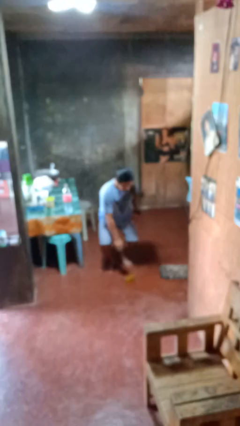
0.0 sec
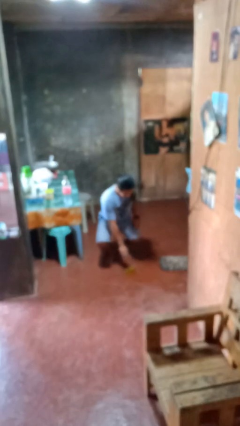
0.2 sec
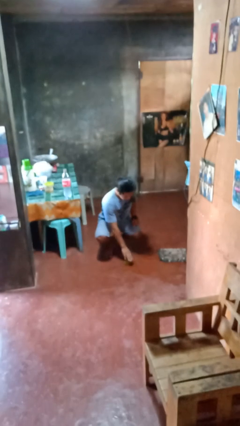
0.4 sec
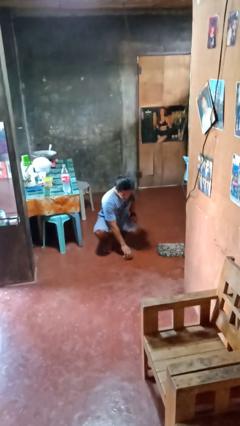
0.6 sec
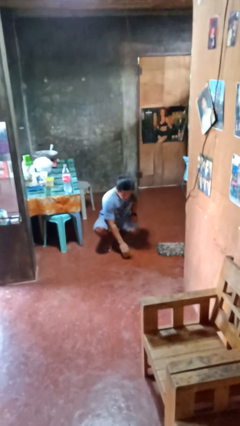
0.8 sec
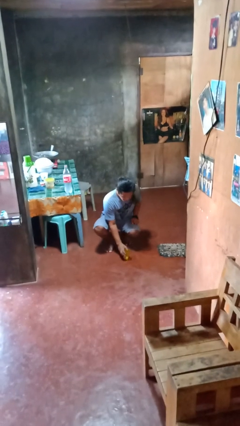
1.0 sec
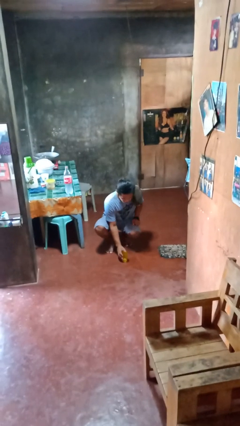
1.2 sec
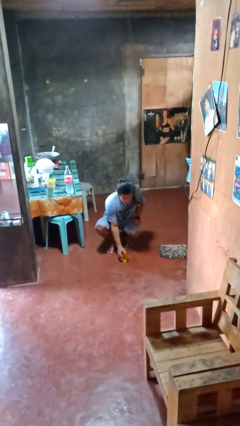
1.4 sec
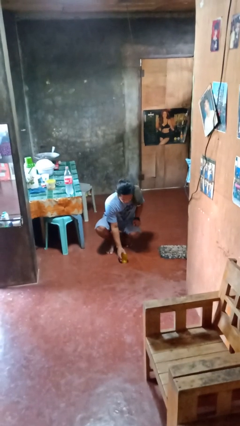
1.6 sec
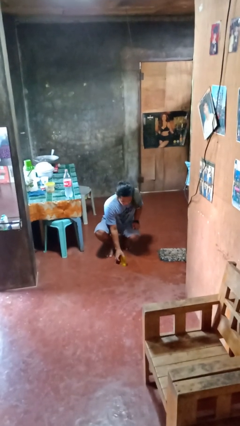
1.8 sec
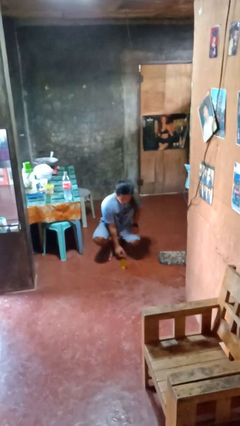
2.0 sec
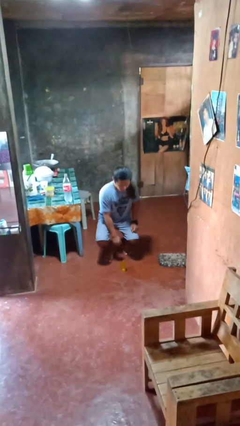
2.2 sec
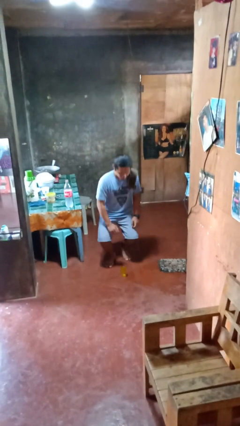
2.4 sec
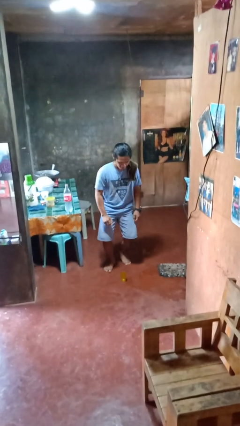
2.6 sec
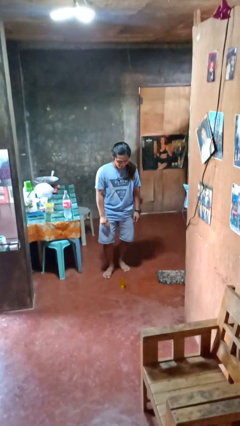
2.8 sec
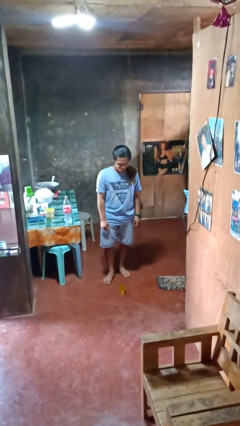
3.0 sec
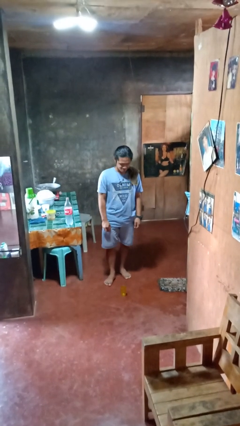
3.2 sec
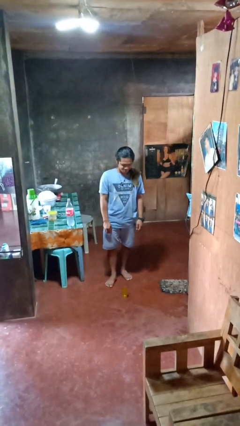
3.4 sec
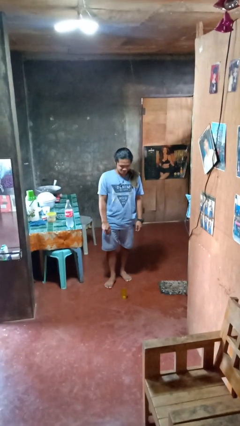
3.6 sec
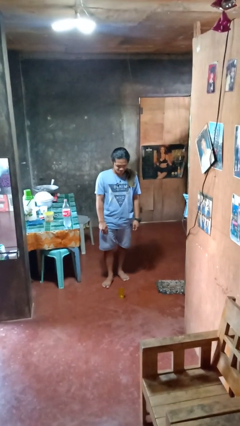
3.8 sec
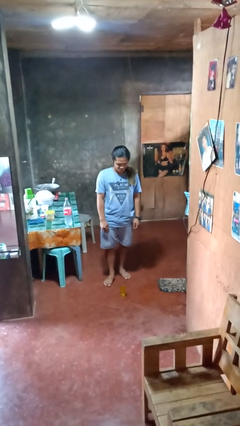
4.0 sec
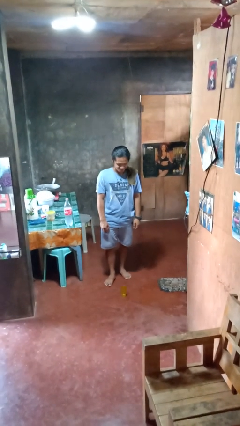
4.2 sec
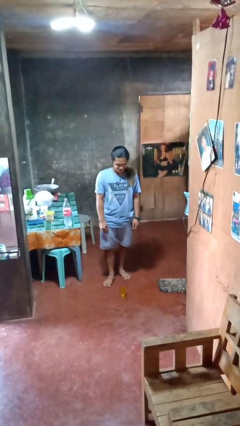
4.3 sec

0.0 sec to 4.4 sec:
person sets upright glass

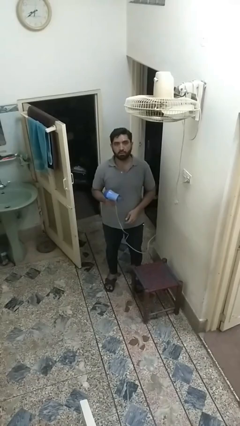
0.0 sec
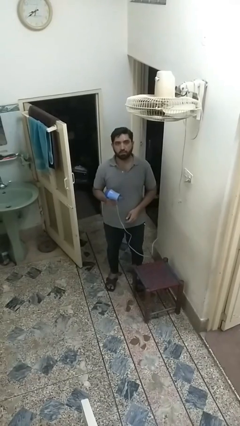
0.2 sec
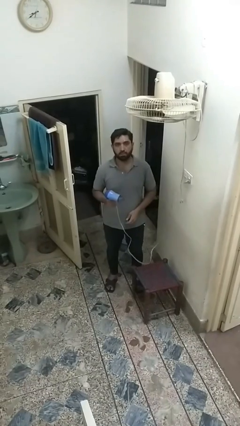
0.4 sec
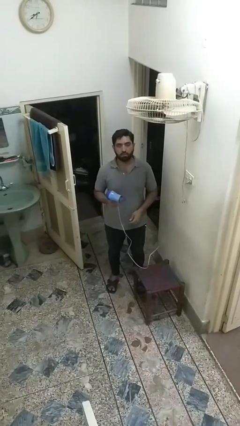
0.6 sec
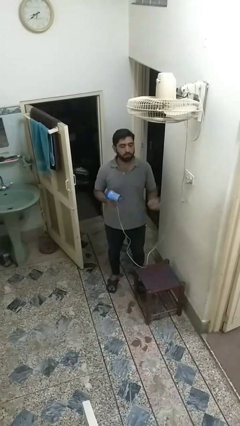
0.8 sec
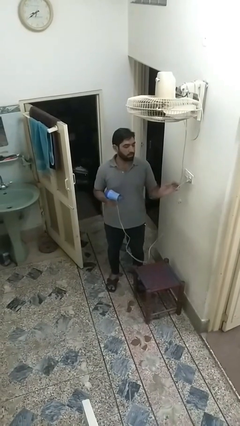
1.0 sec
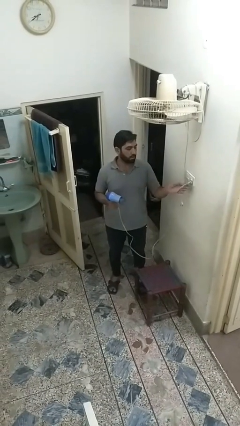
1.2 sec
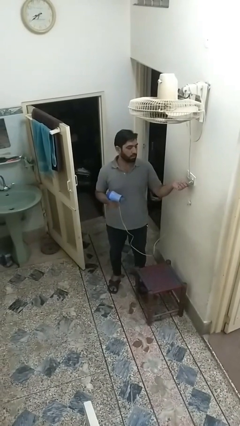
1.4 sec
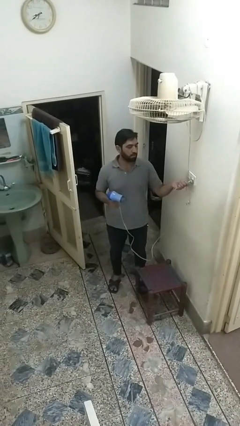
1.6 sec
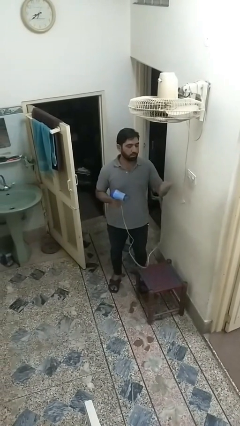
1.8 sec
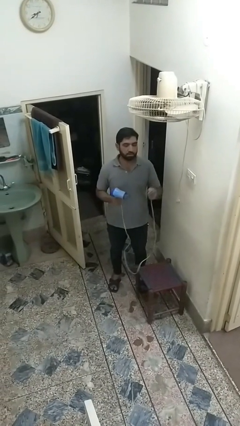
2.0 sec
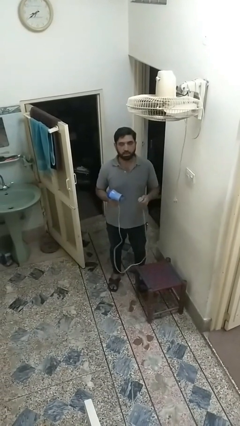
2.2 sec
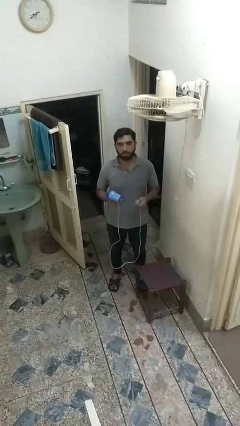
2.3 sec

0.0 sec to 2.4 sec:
person unplugs from electrical socket

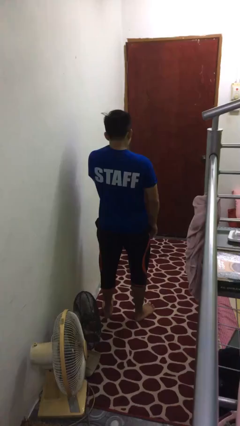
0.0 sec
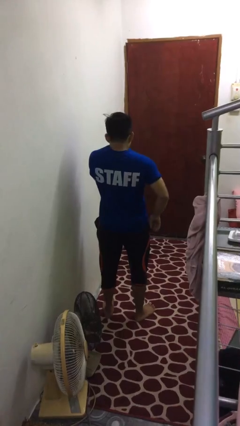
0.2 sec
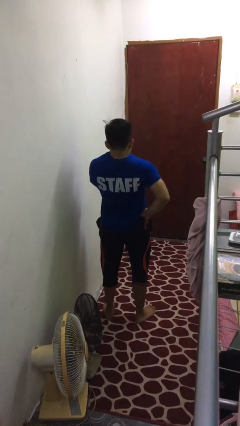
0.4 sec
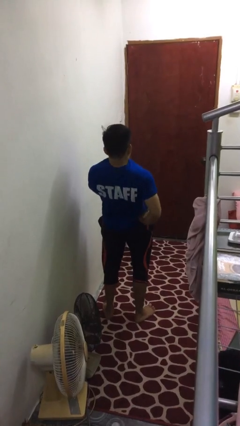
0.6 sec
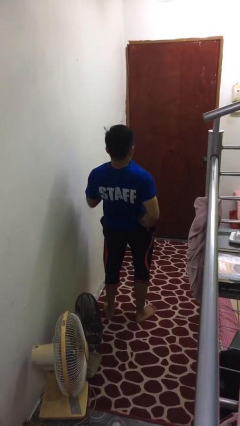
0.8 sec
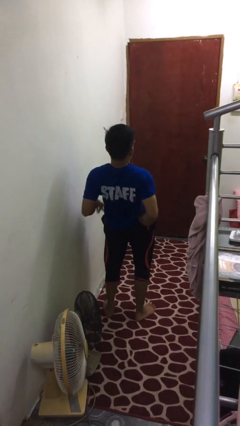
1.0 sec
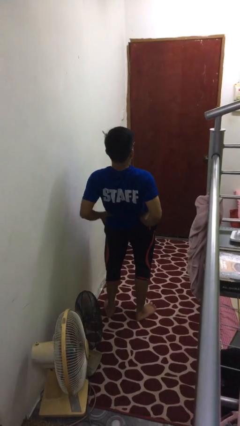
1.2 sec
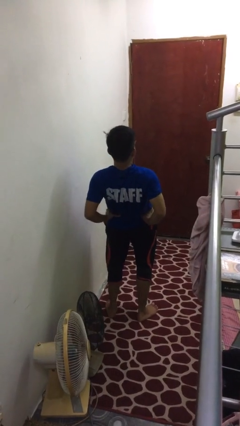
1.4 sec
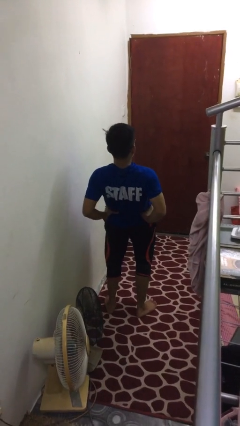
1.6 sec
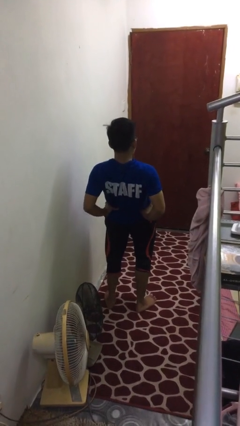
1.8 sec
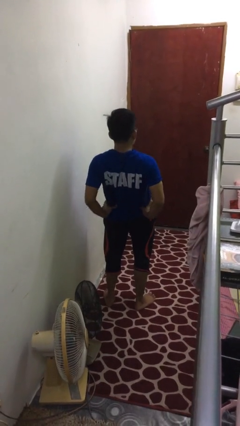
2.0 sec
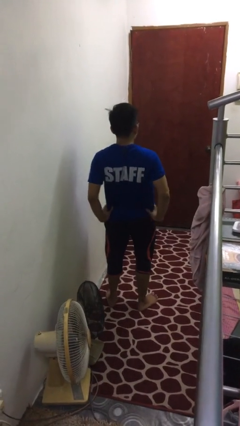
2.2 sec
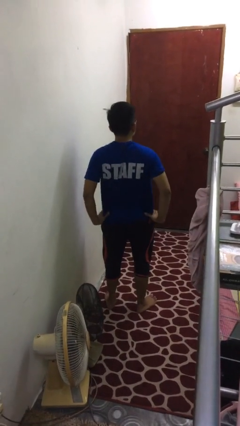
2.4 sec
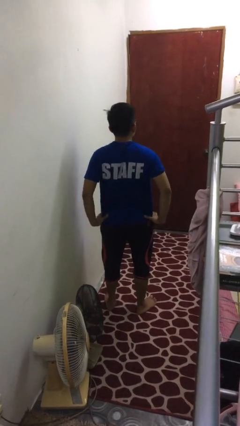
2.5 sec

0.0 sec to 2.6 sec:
person stretches back

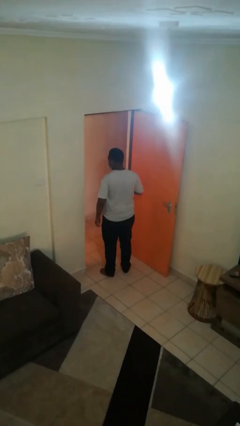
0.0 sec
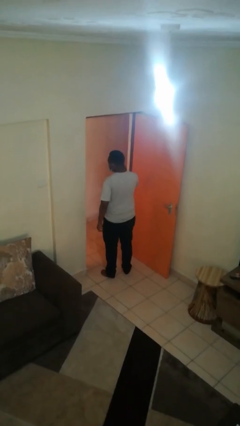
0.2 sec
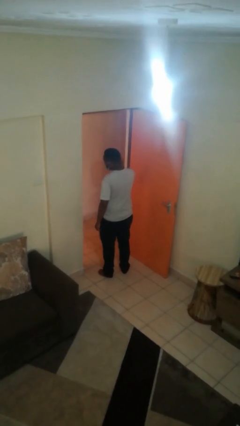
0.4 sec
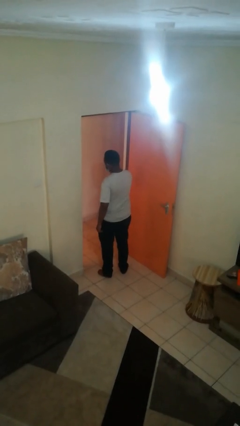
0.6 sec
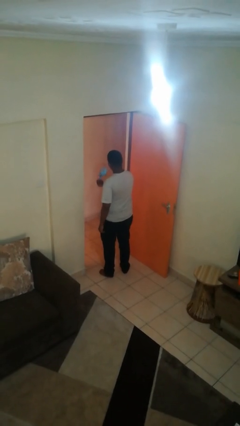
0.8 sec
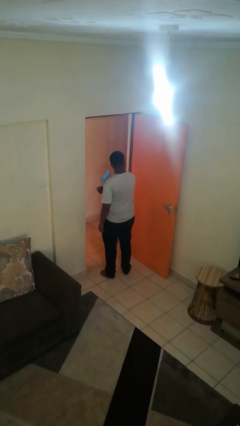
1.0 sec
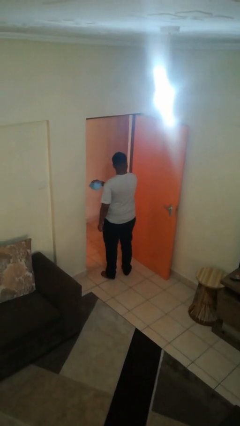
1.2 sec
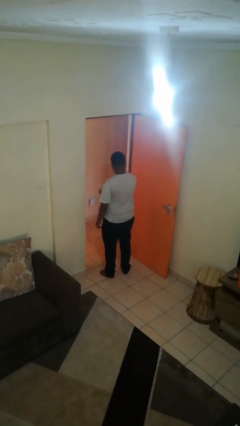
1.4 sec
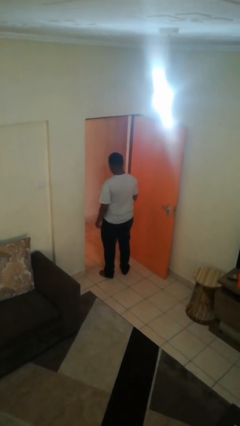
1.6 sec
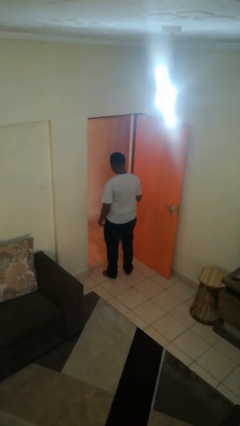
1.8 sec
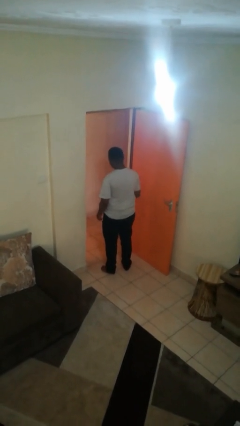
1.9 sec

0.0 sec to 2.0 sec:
person takes off facemask

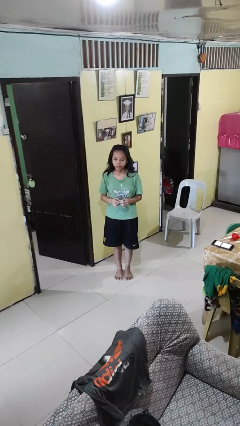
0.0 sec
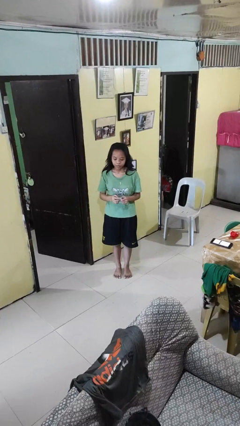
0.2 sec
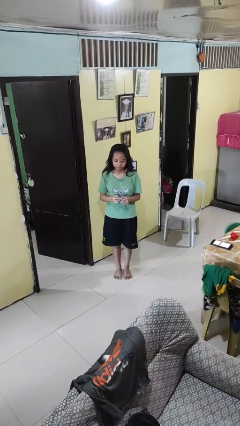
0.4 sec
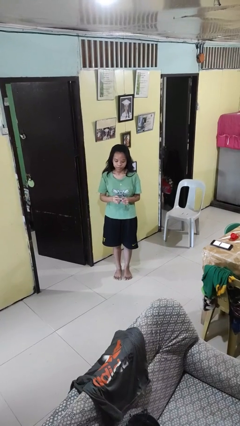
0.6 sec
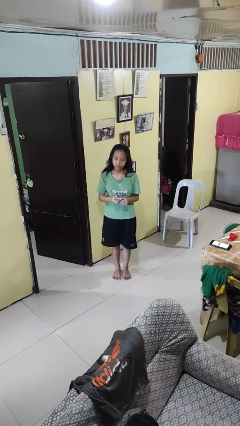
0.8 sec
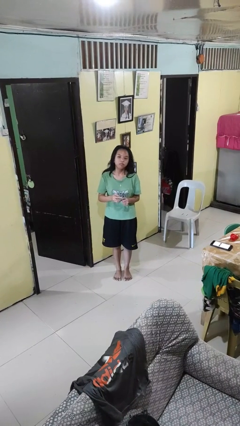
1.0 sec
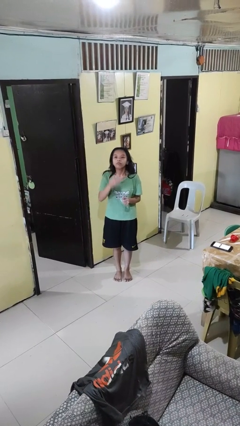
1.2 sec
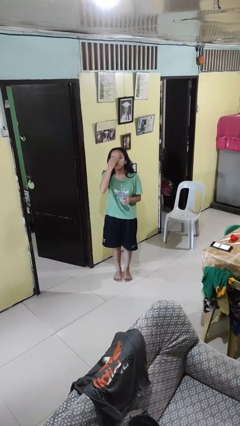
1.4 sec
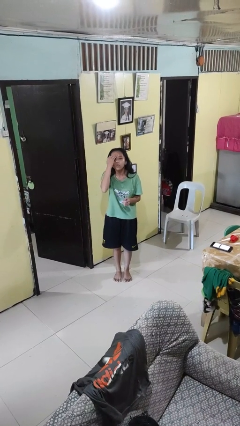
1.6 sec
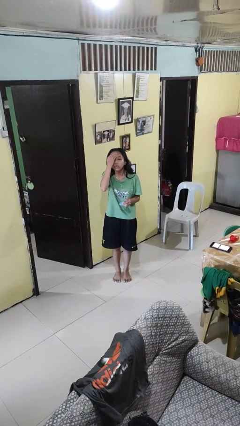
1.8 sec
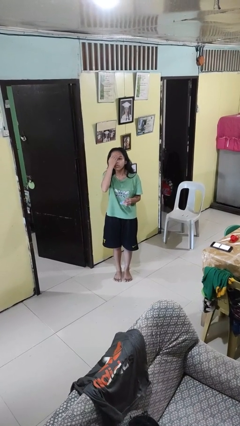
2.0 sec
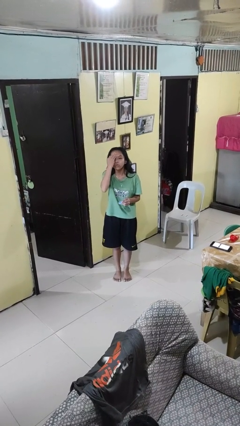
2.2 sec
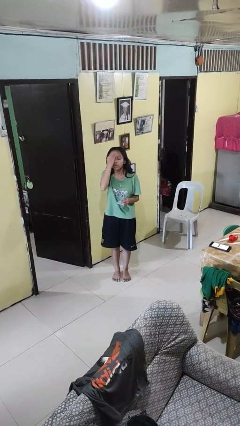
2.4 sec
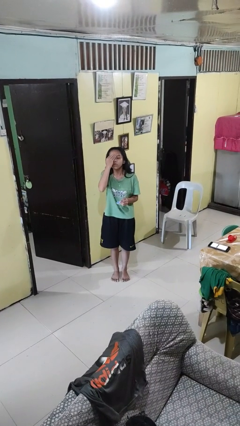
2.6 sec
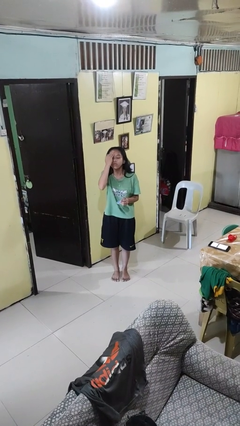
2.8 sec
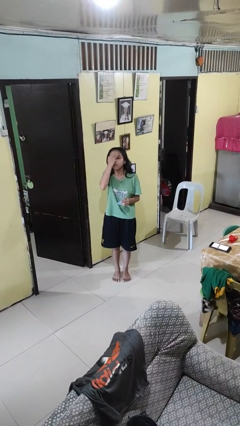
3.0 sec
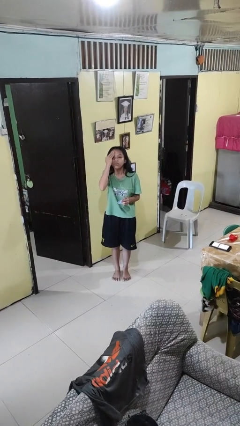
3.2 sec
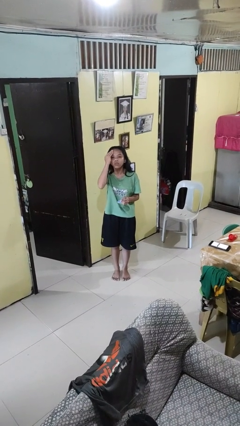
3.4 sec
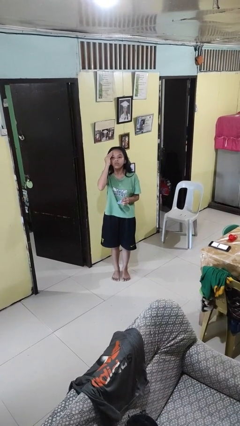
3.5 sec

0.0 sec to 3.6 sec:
person applies facial moisturizer

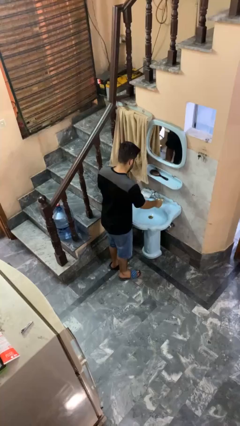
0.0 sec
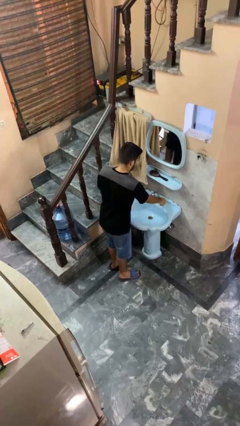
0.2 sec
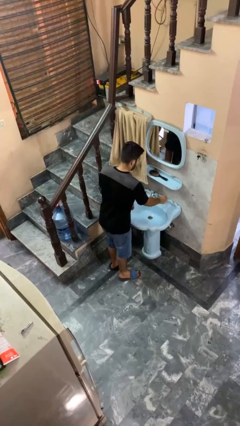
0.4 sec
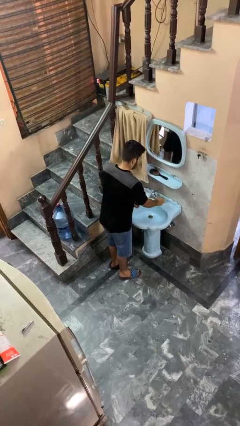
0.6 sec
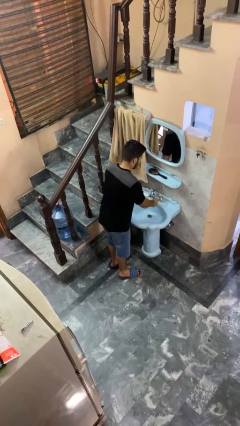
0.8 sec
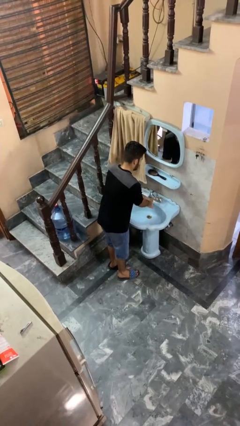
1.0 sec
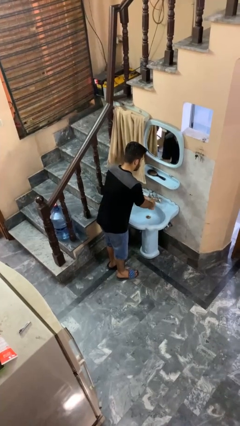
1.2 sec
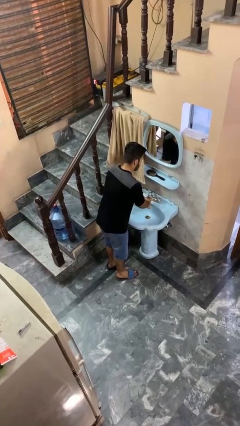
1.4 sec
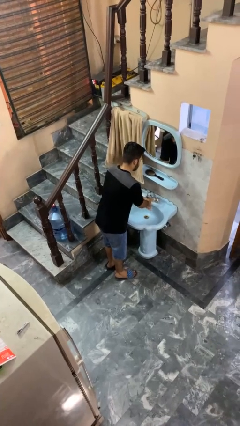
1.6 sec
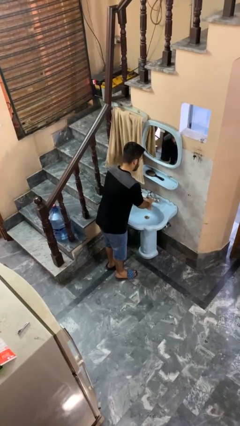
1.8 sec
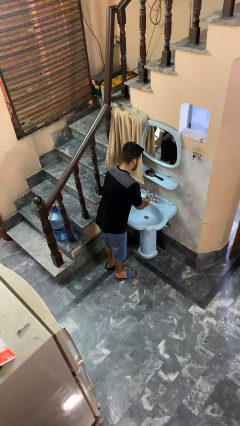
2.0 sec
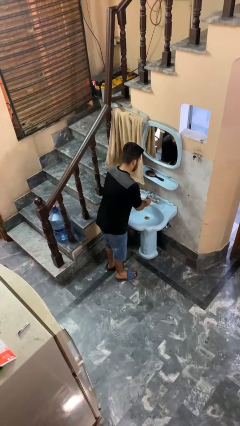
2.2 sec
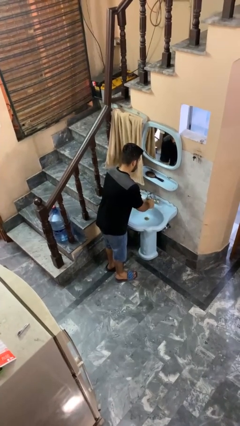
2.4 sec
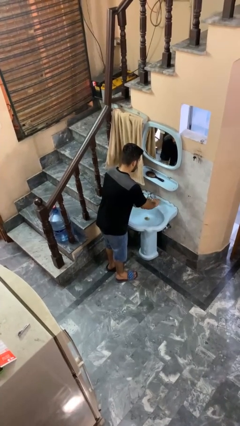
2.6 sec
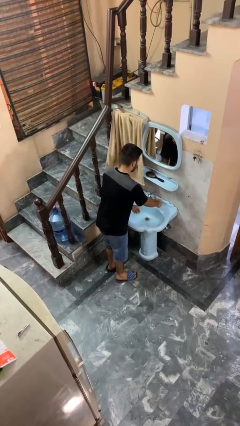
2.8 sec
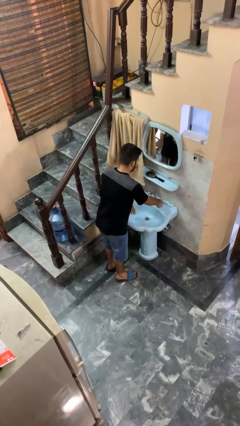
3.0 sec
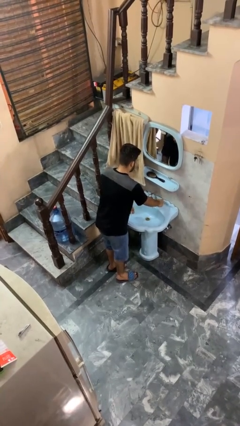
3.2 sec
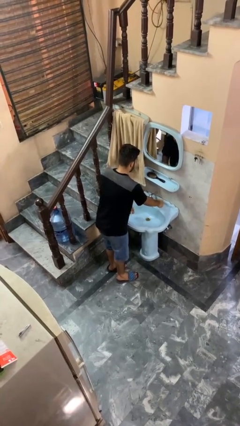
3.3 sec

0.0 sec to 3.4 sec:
person washes hands
